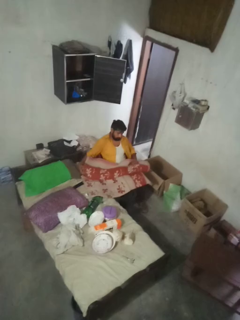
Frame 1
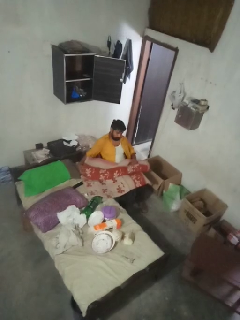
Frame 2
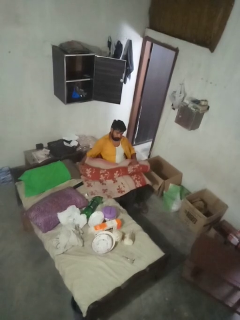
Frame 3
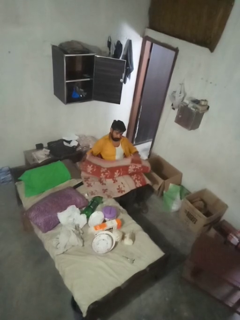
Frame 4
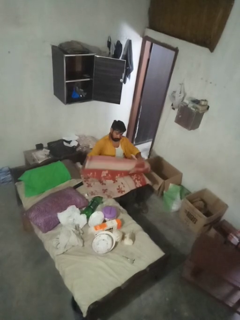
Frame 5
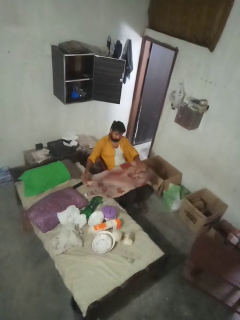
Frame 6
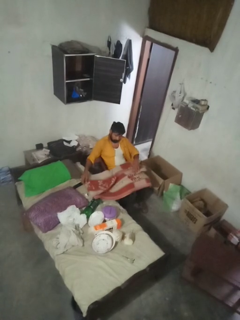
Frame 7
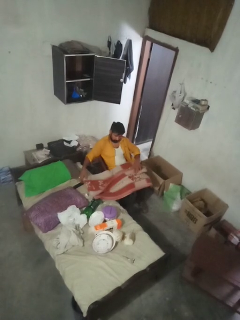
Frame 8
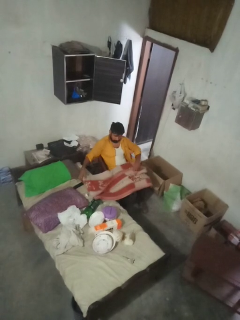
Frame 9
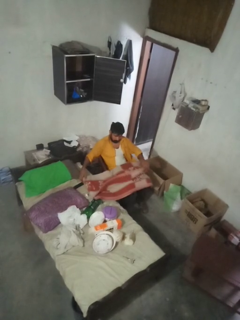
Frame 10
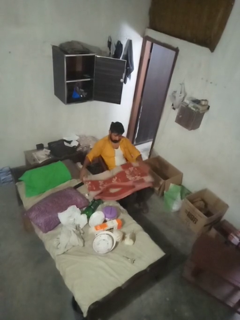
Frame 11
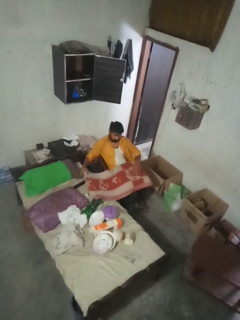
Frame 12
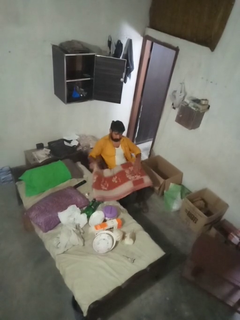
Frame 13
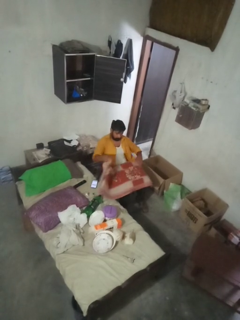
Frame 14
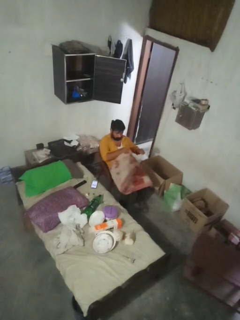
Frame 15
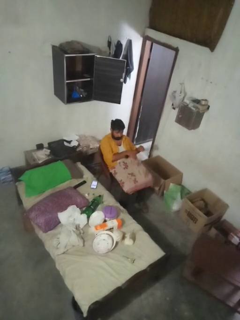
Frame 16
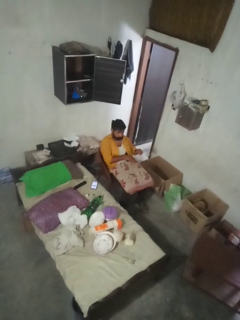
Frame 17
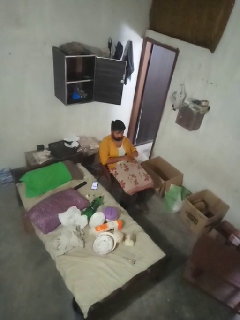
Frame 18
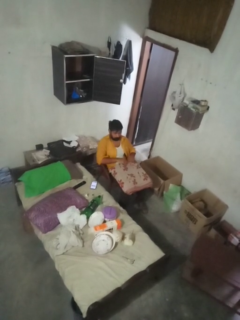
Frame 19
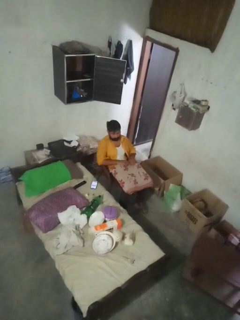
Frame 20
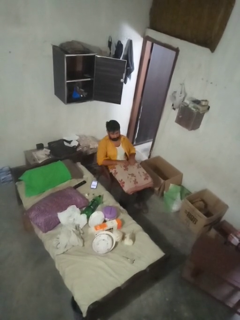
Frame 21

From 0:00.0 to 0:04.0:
person folds blanket

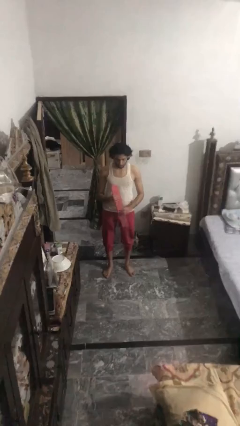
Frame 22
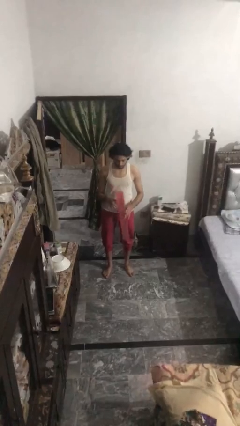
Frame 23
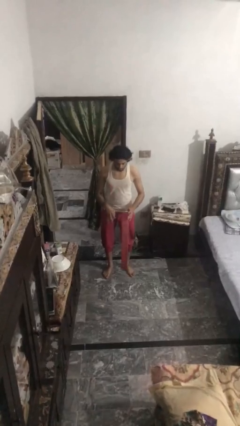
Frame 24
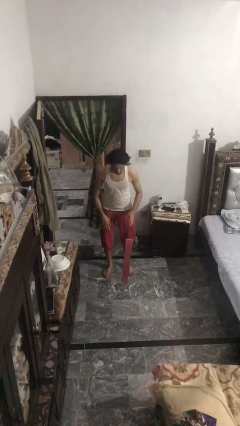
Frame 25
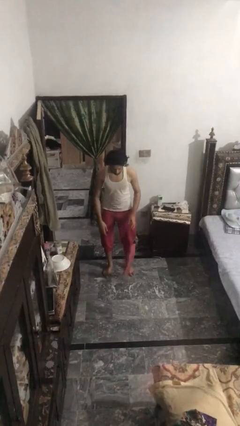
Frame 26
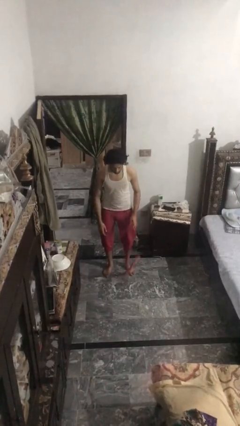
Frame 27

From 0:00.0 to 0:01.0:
person drops object

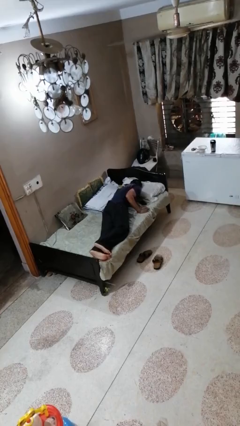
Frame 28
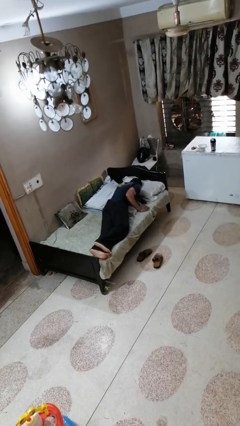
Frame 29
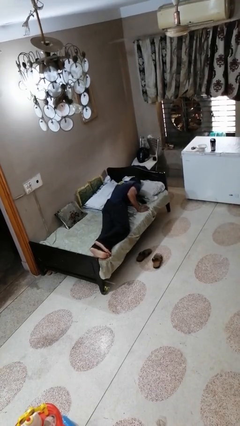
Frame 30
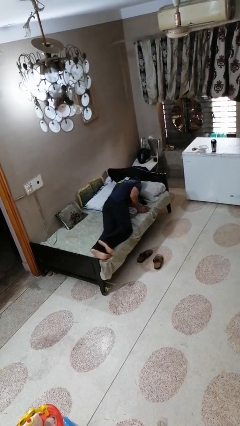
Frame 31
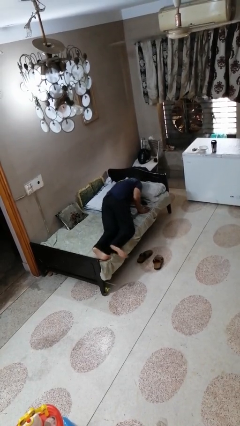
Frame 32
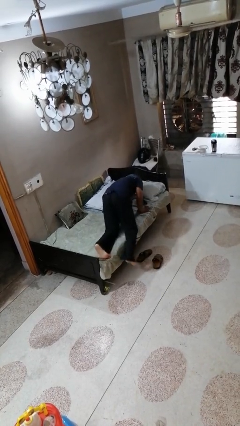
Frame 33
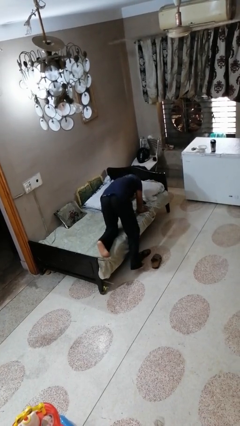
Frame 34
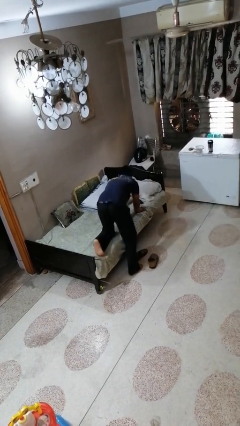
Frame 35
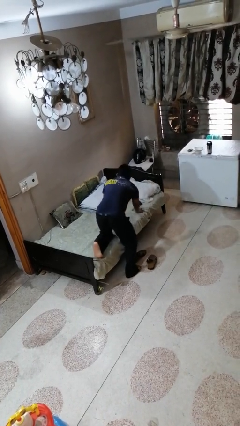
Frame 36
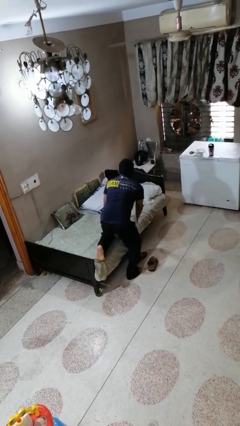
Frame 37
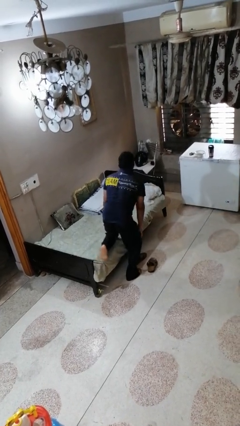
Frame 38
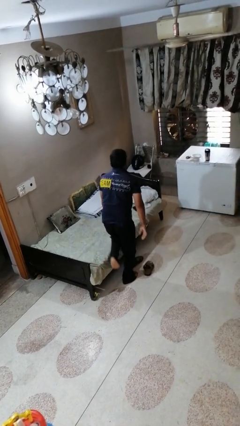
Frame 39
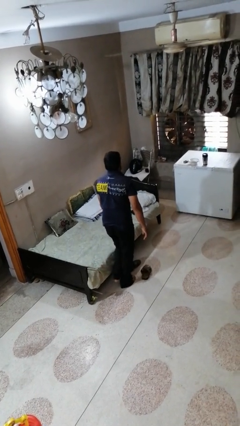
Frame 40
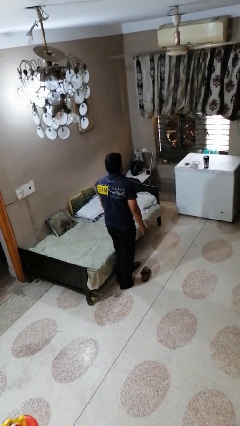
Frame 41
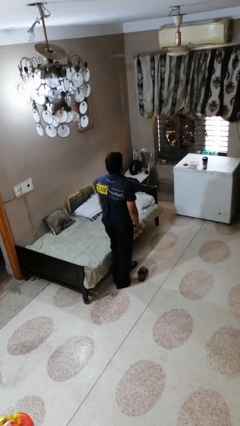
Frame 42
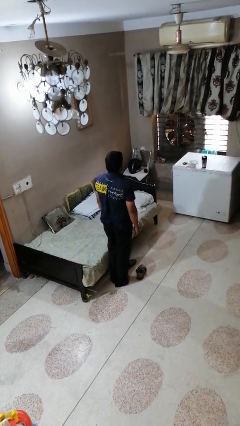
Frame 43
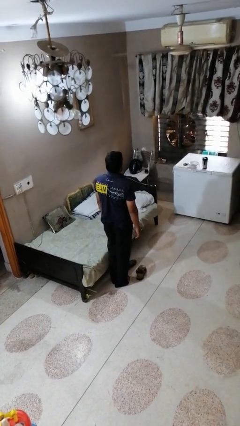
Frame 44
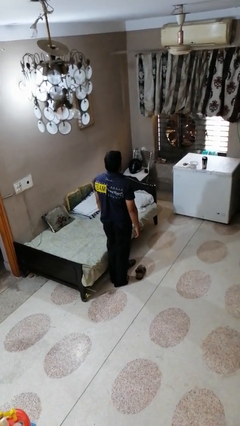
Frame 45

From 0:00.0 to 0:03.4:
person stands up

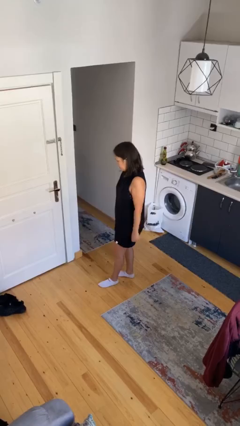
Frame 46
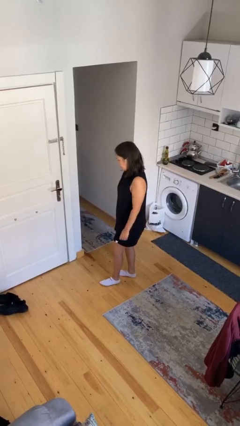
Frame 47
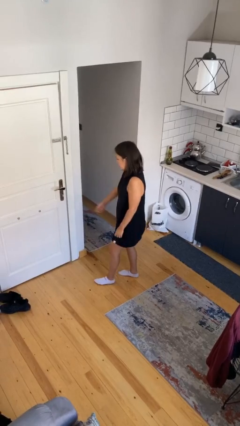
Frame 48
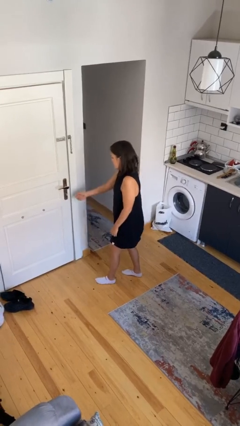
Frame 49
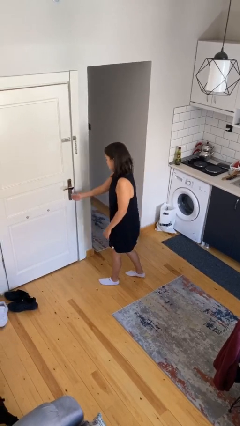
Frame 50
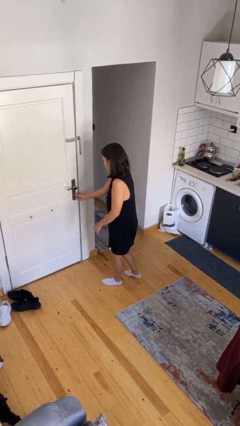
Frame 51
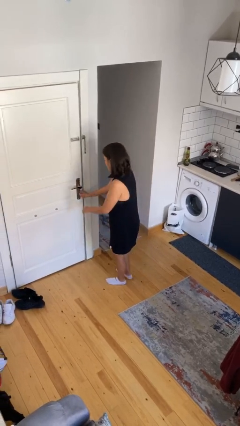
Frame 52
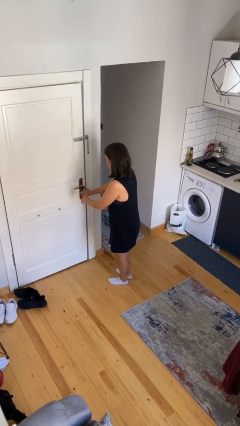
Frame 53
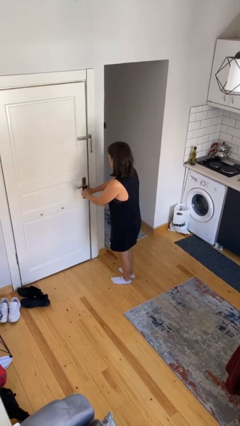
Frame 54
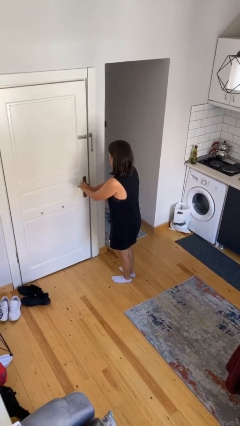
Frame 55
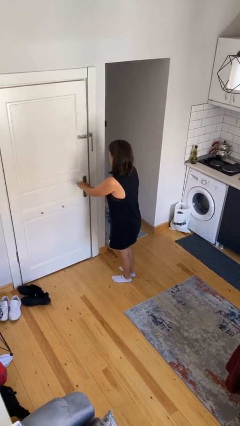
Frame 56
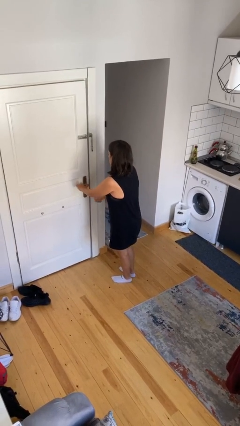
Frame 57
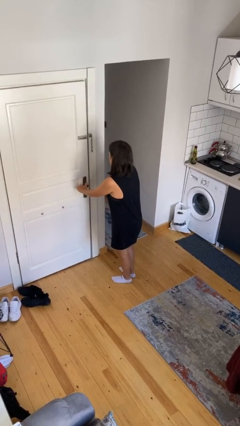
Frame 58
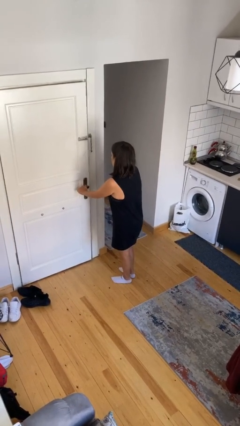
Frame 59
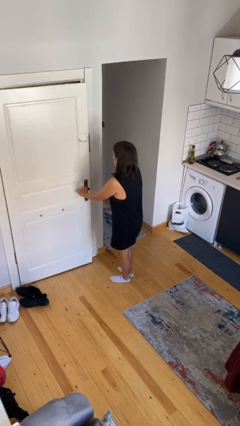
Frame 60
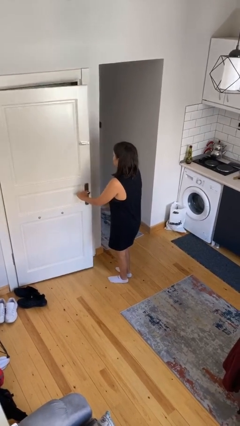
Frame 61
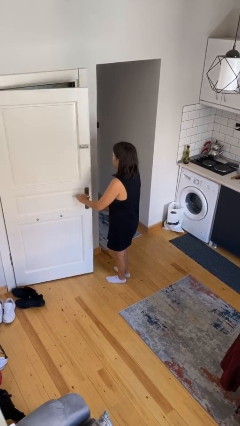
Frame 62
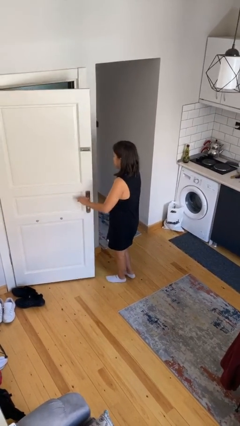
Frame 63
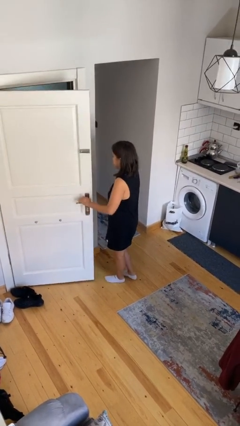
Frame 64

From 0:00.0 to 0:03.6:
person unlocks door with keys

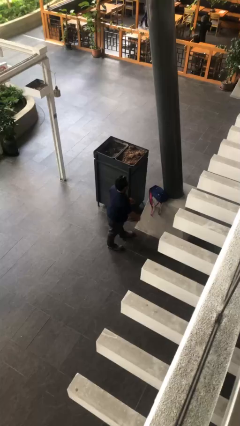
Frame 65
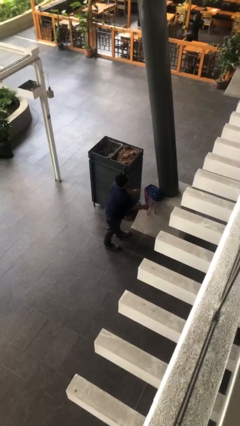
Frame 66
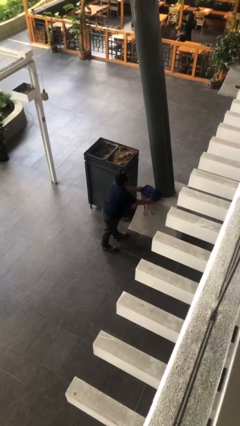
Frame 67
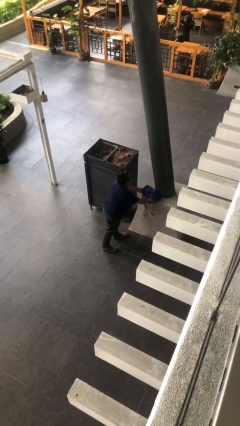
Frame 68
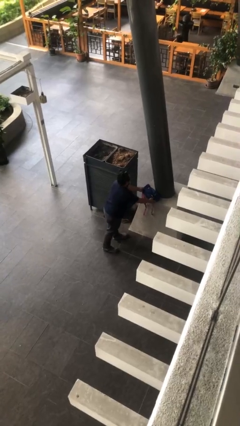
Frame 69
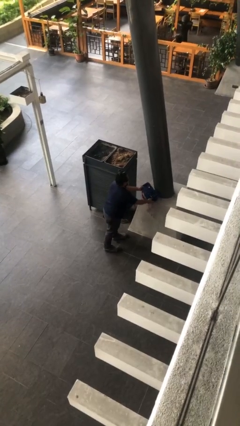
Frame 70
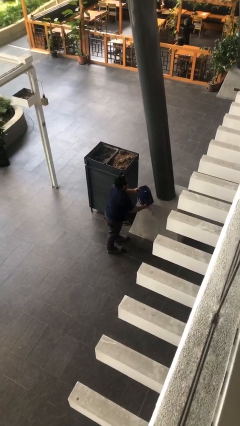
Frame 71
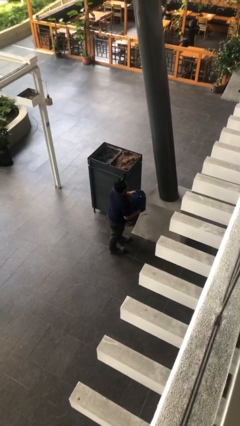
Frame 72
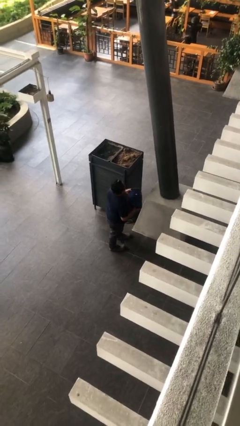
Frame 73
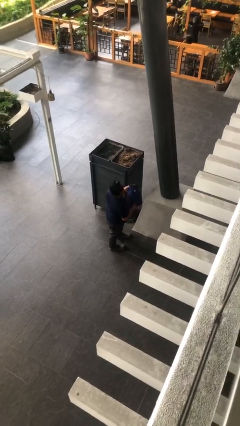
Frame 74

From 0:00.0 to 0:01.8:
person picks up object from table

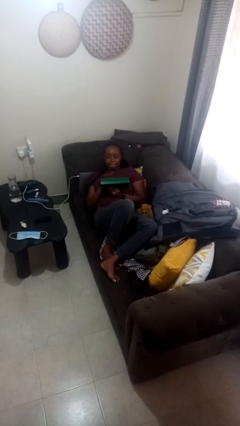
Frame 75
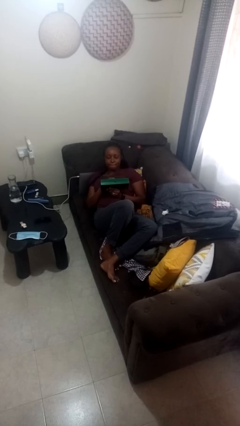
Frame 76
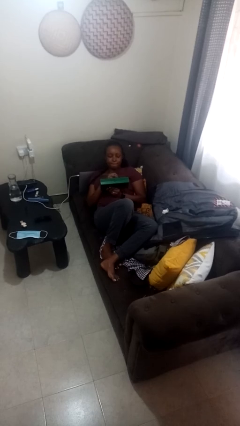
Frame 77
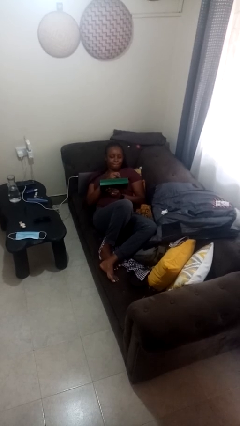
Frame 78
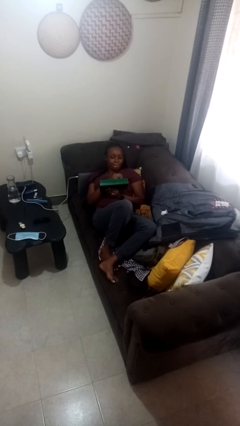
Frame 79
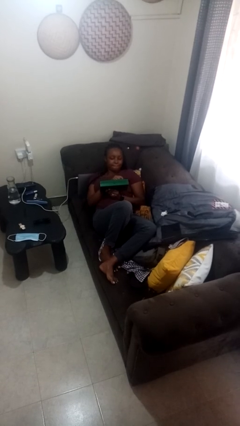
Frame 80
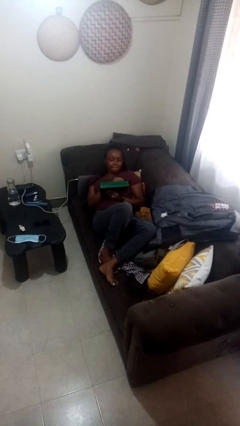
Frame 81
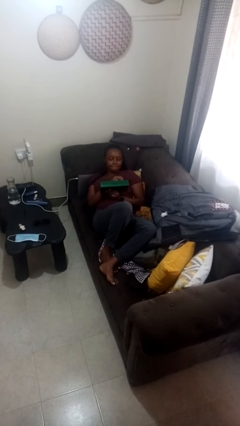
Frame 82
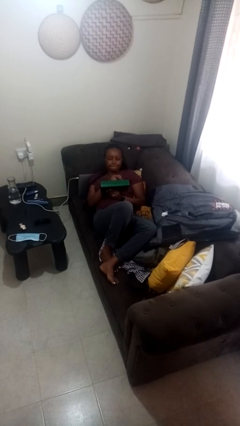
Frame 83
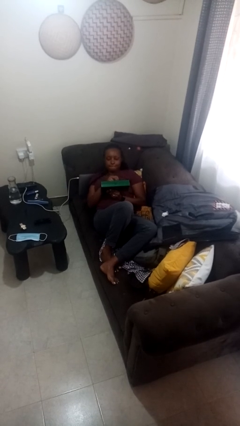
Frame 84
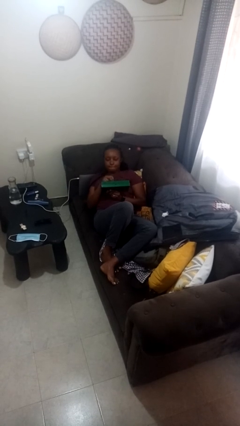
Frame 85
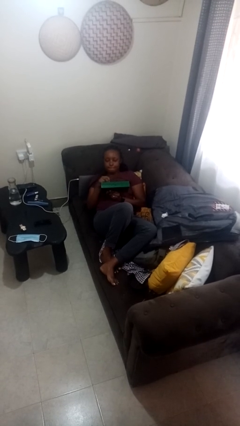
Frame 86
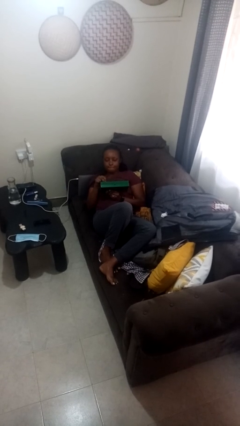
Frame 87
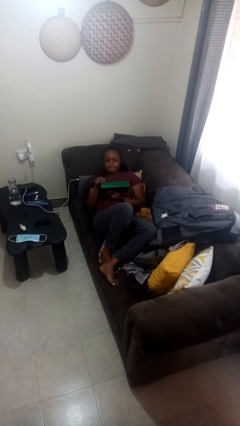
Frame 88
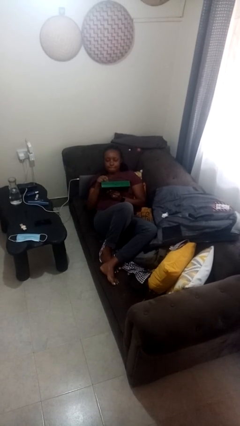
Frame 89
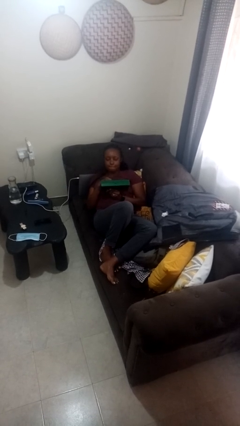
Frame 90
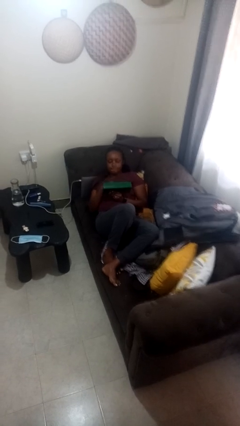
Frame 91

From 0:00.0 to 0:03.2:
person interacts with handheld game

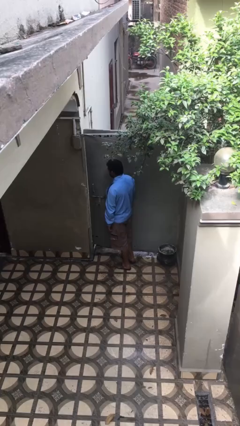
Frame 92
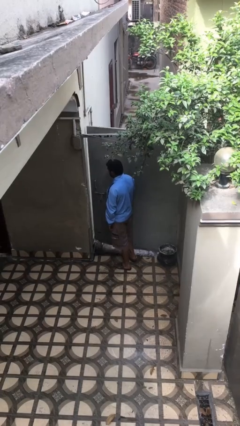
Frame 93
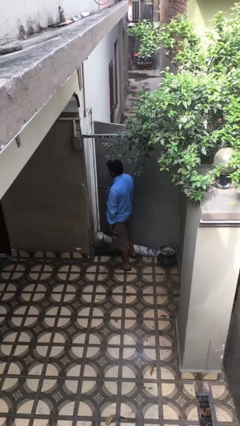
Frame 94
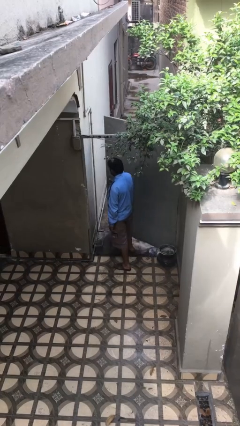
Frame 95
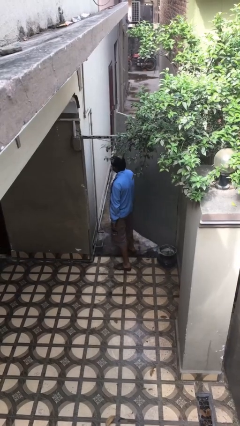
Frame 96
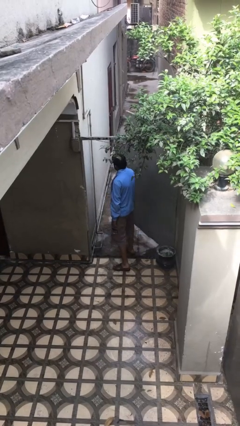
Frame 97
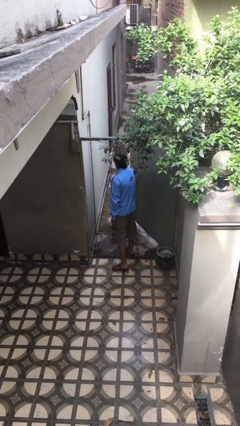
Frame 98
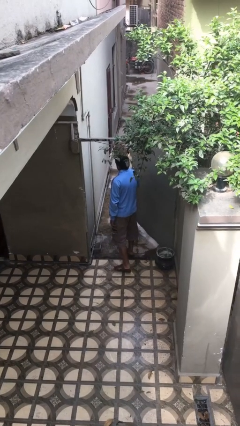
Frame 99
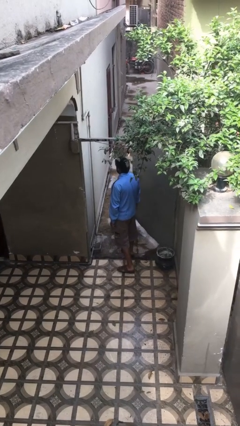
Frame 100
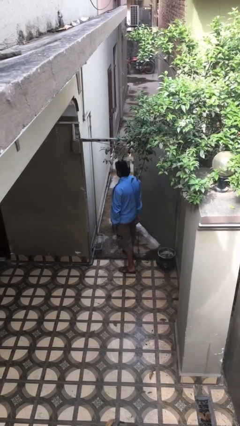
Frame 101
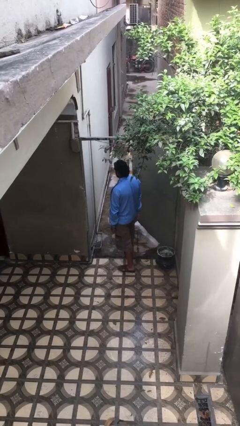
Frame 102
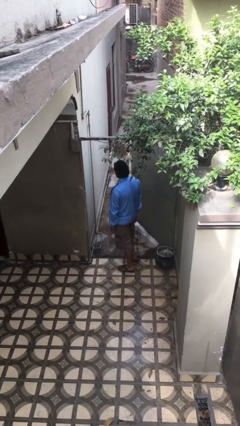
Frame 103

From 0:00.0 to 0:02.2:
person opens facility door
